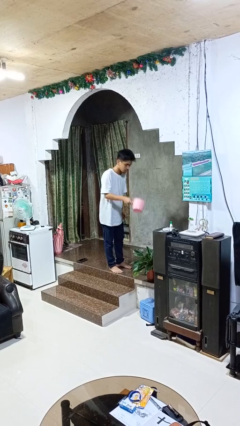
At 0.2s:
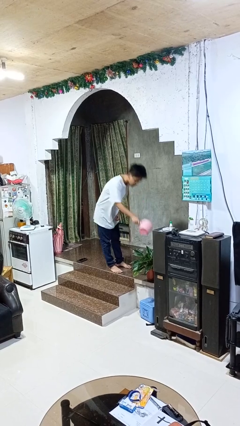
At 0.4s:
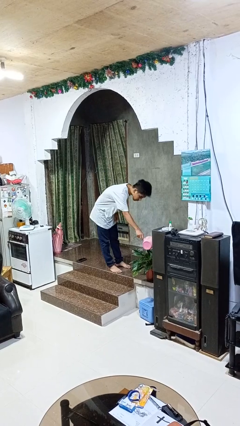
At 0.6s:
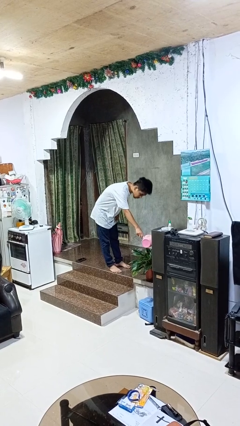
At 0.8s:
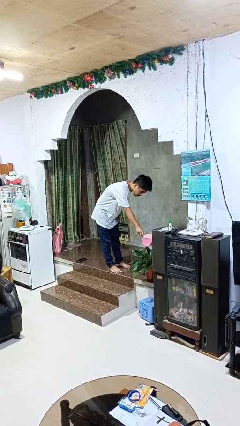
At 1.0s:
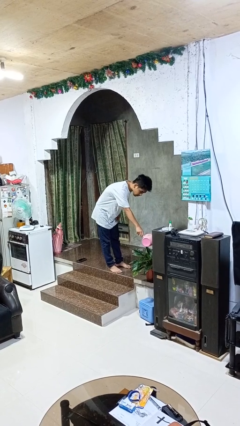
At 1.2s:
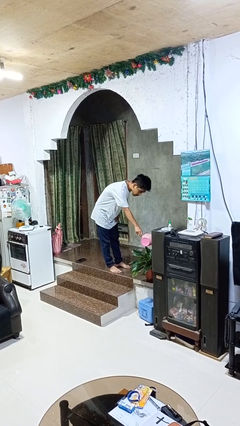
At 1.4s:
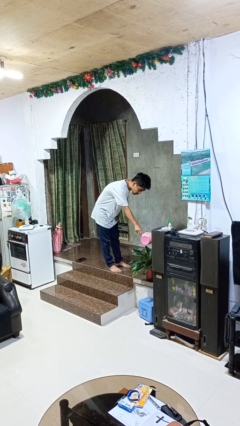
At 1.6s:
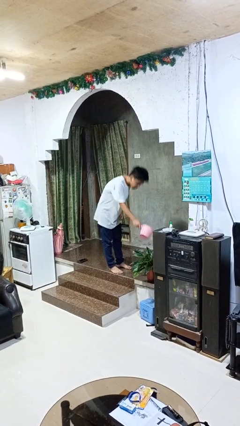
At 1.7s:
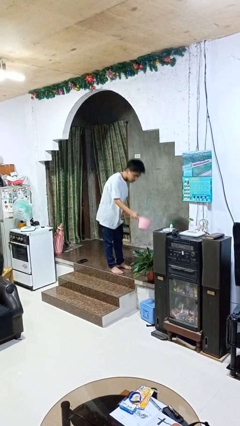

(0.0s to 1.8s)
person waters houseplant

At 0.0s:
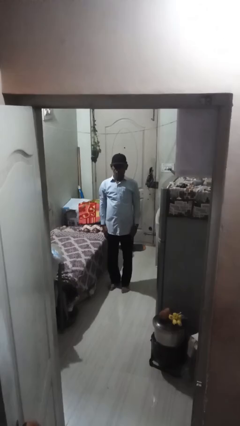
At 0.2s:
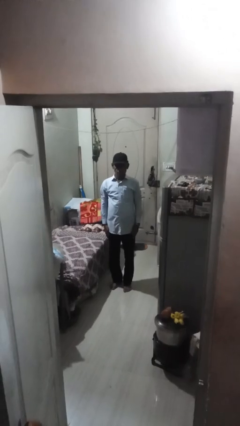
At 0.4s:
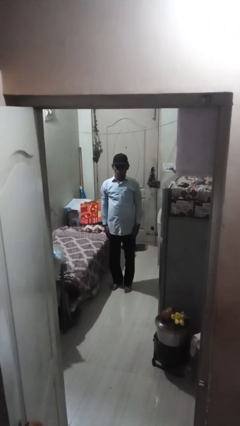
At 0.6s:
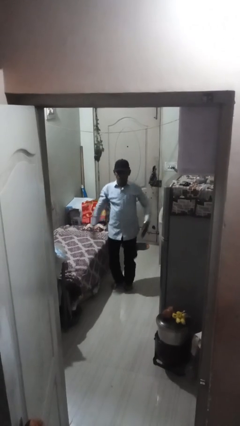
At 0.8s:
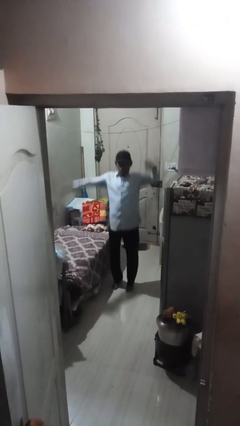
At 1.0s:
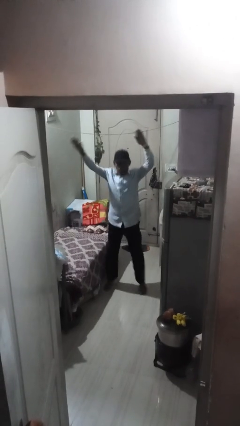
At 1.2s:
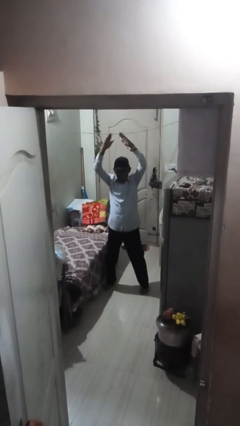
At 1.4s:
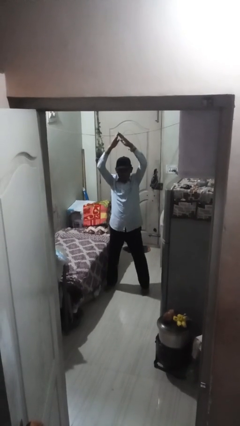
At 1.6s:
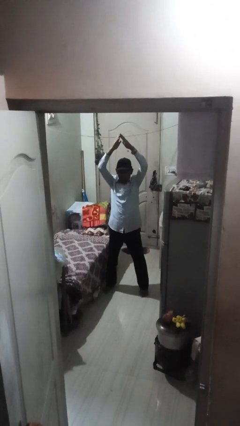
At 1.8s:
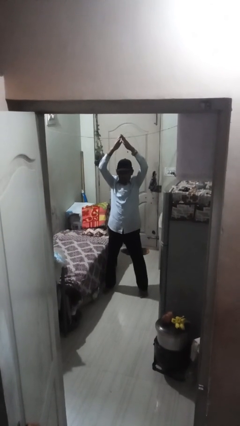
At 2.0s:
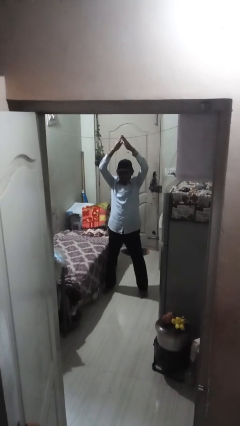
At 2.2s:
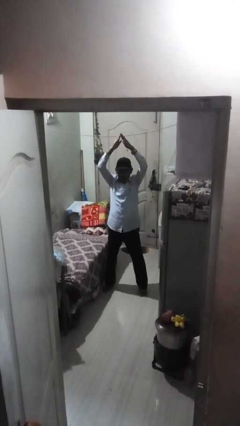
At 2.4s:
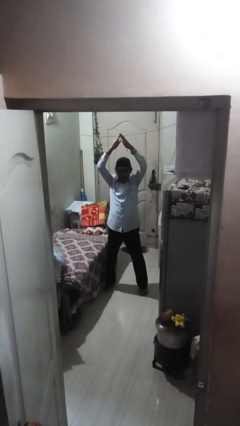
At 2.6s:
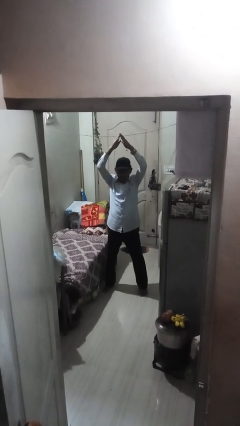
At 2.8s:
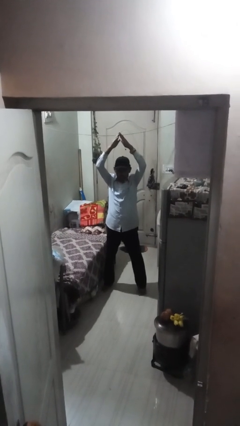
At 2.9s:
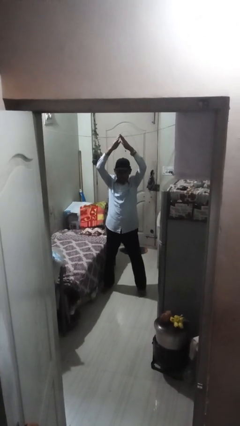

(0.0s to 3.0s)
person exercises with jumping jacks

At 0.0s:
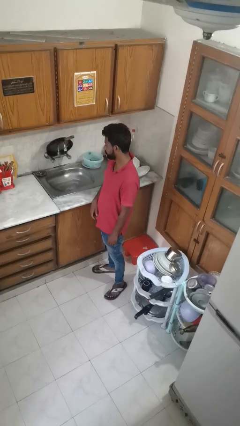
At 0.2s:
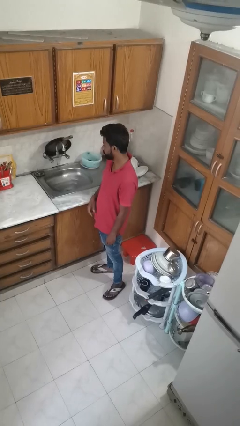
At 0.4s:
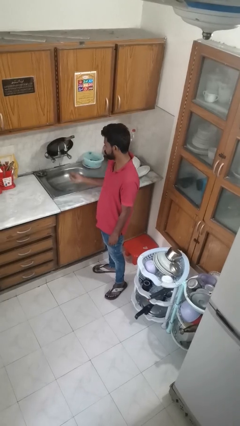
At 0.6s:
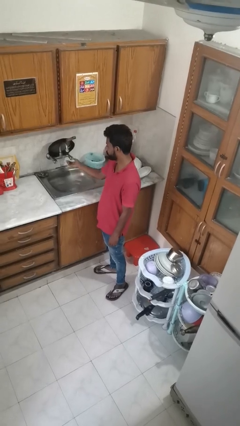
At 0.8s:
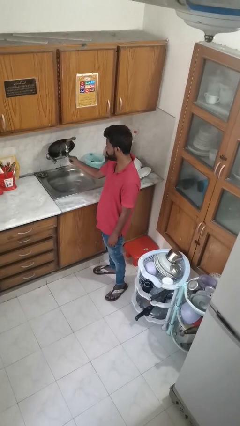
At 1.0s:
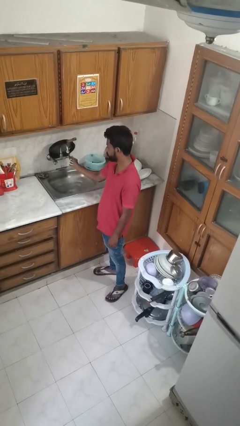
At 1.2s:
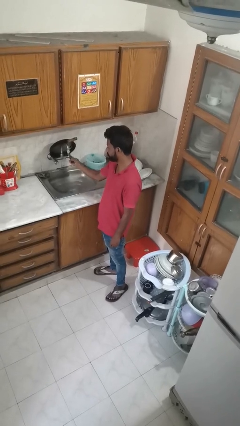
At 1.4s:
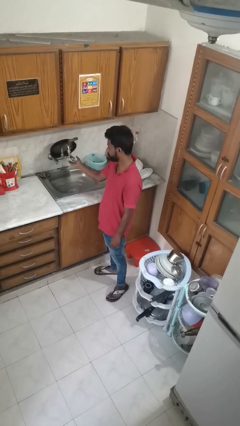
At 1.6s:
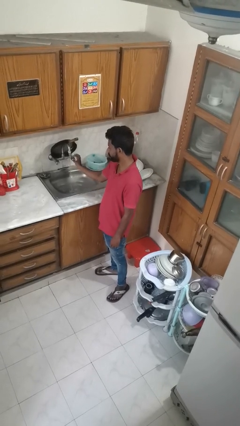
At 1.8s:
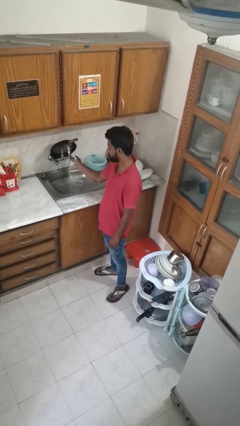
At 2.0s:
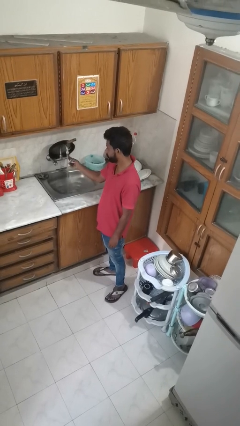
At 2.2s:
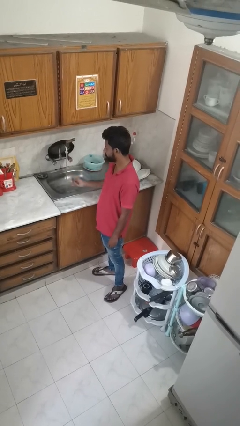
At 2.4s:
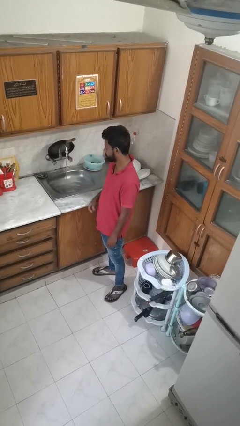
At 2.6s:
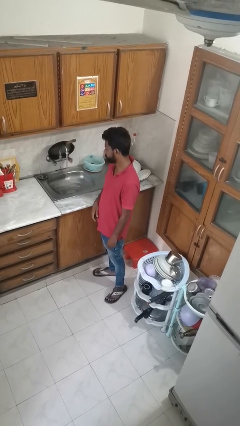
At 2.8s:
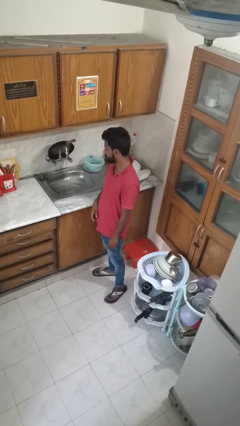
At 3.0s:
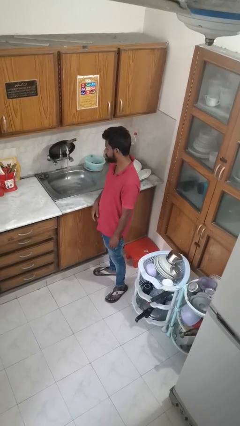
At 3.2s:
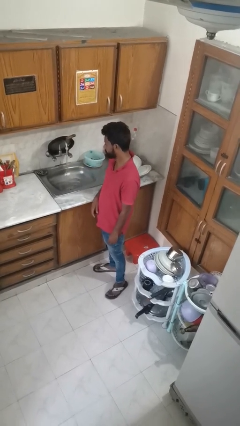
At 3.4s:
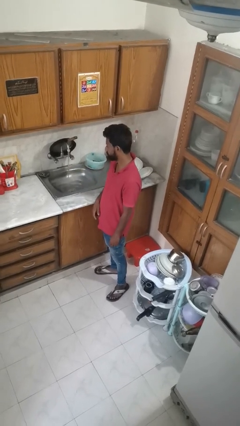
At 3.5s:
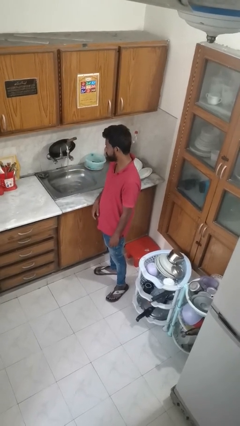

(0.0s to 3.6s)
person turns on faucet

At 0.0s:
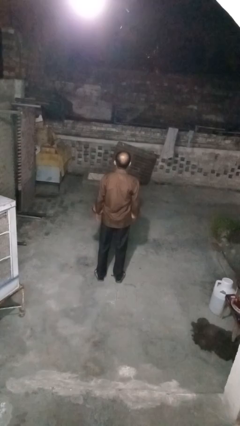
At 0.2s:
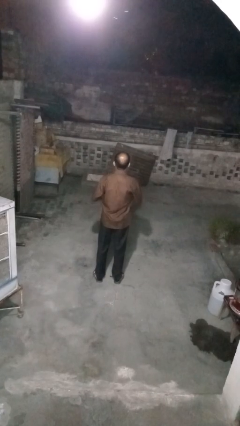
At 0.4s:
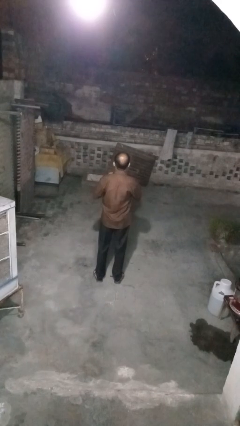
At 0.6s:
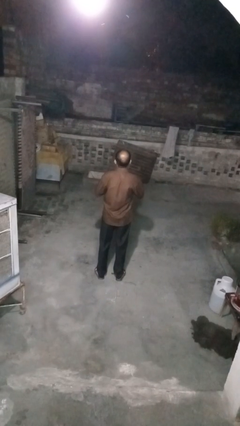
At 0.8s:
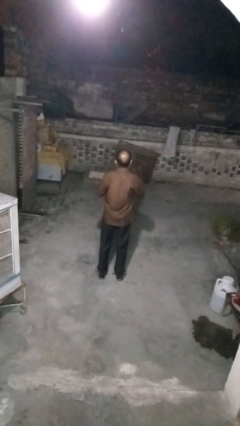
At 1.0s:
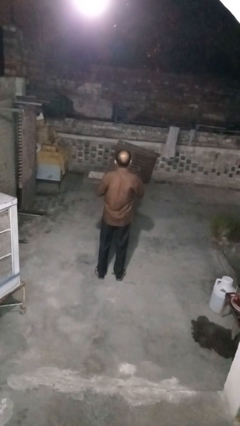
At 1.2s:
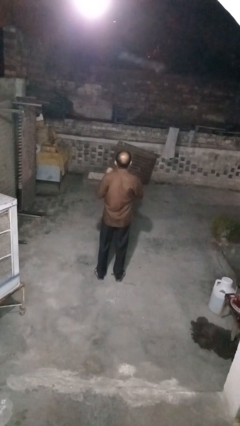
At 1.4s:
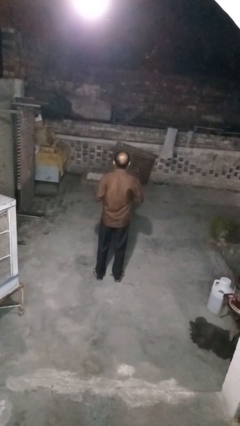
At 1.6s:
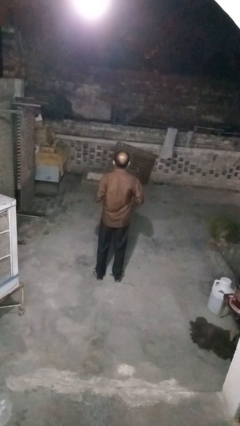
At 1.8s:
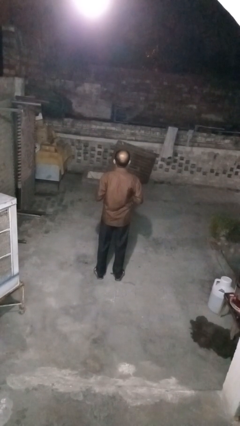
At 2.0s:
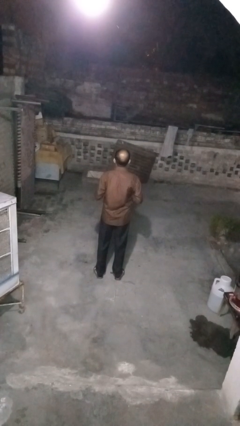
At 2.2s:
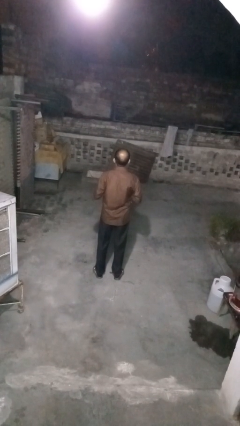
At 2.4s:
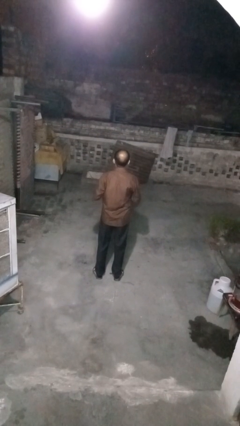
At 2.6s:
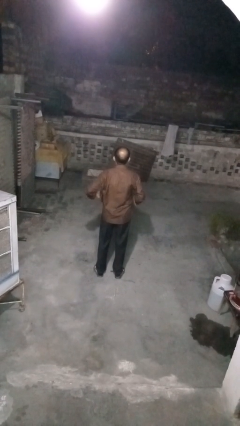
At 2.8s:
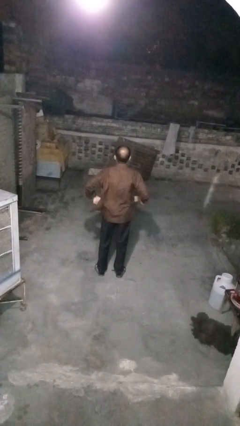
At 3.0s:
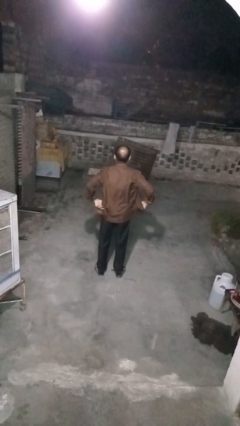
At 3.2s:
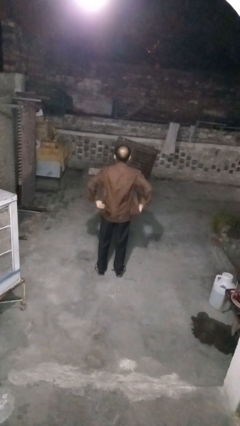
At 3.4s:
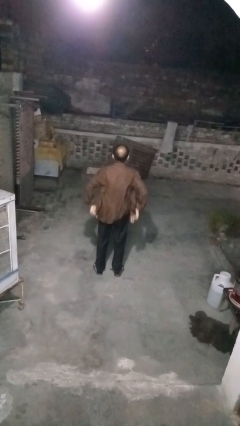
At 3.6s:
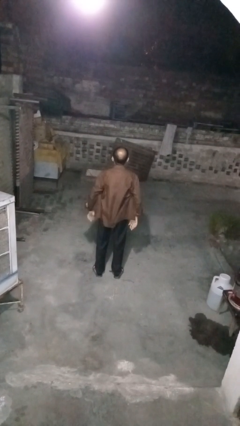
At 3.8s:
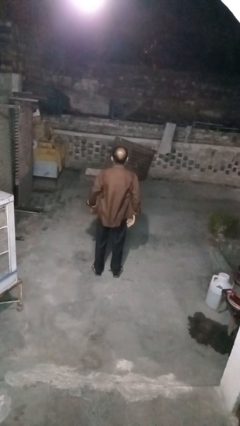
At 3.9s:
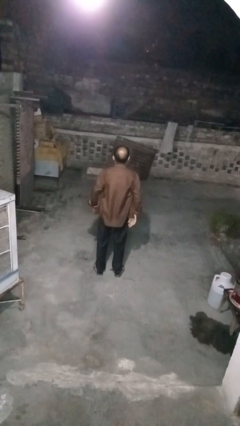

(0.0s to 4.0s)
person unbuttons shirt

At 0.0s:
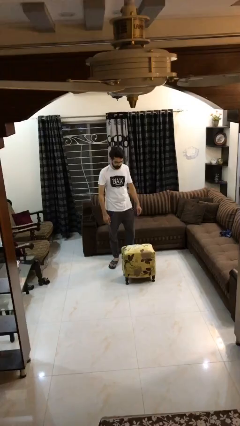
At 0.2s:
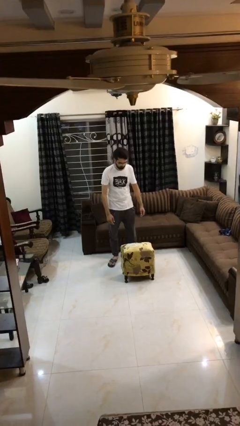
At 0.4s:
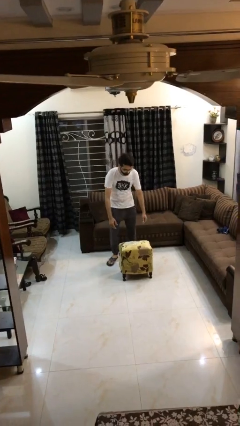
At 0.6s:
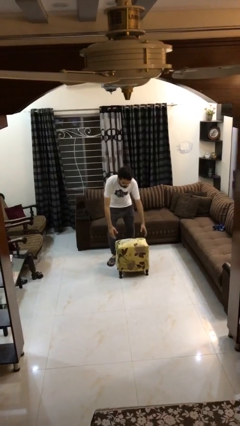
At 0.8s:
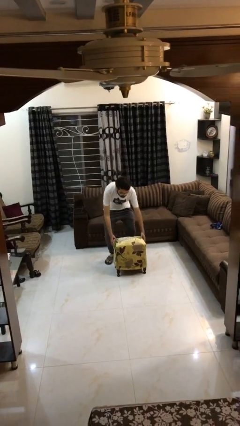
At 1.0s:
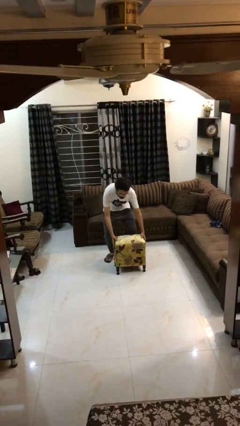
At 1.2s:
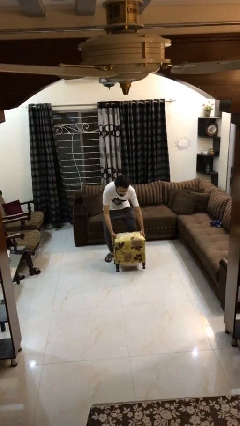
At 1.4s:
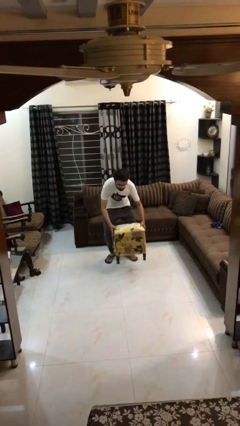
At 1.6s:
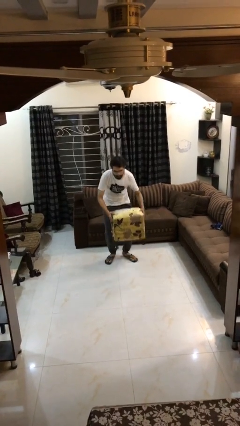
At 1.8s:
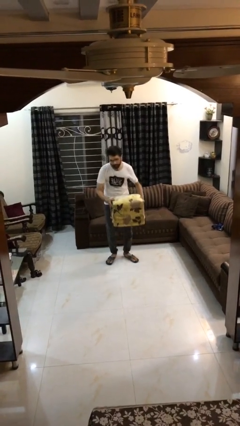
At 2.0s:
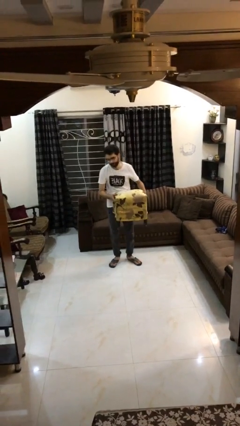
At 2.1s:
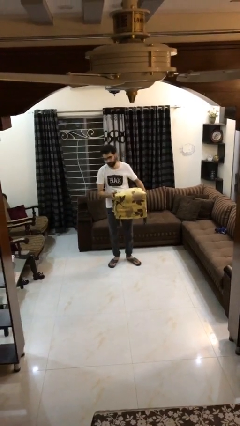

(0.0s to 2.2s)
person picks up object from floor

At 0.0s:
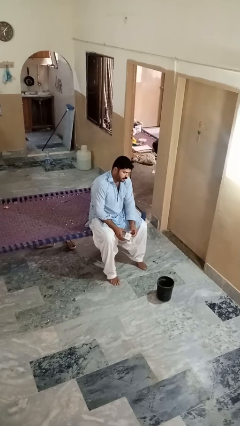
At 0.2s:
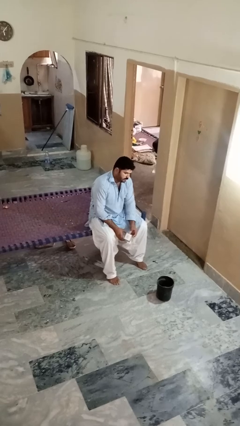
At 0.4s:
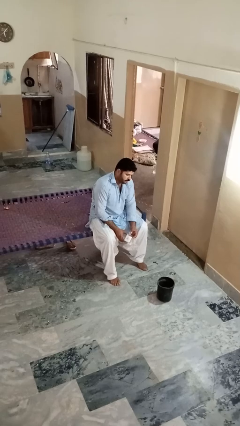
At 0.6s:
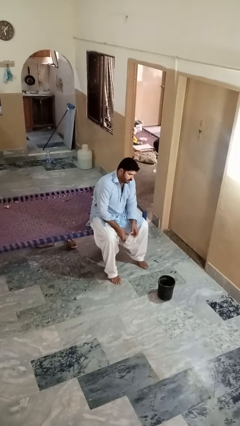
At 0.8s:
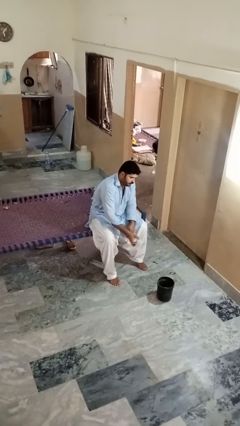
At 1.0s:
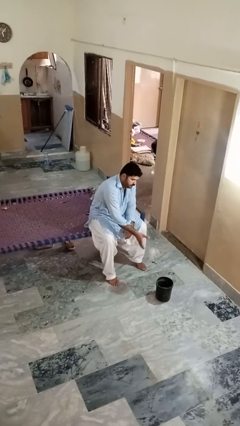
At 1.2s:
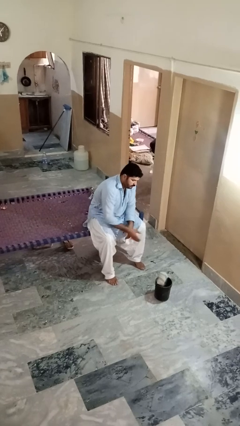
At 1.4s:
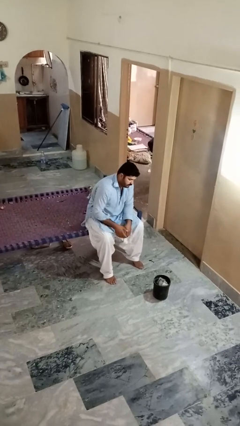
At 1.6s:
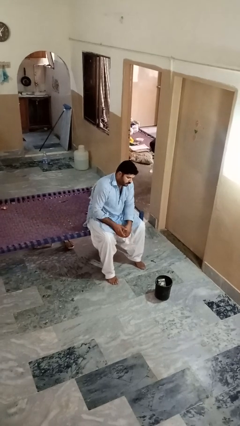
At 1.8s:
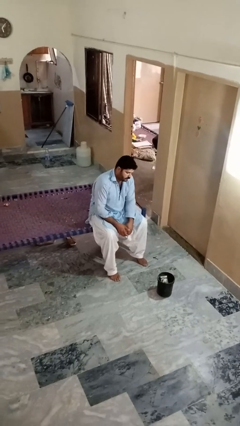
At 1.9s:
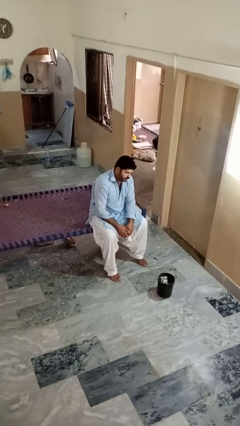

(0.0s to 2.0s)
person puts object into basket

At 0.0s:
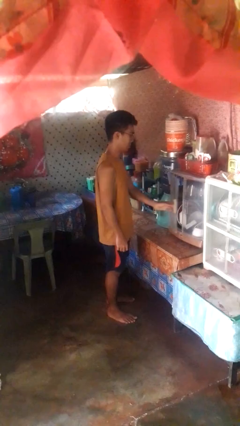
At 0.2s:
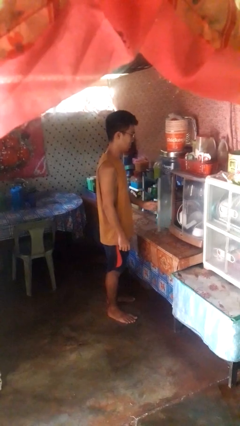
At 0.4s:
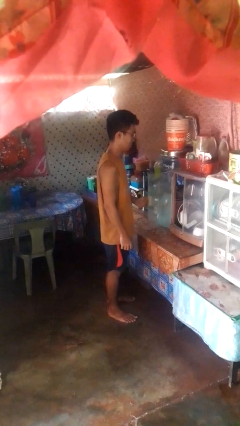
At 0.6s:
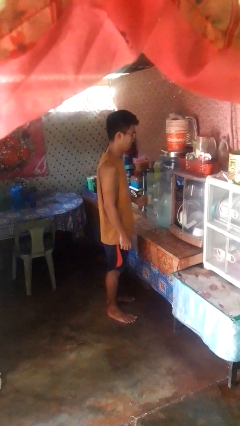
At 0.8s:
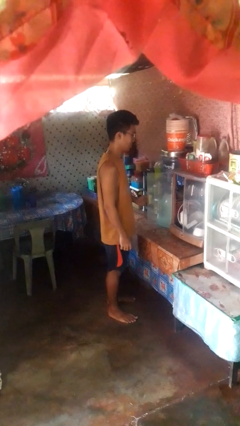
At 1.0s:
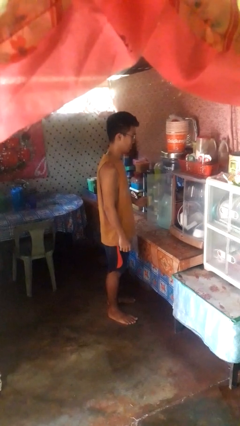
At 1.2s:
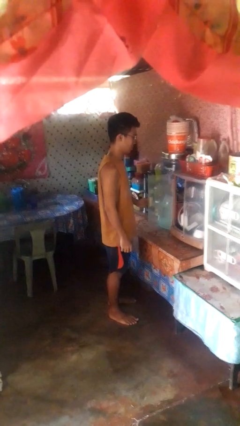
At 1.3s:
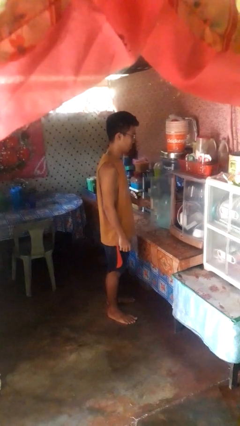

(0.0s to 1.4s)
person opens cabinet
